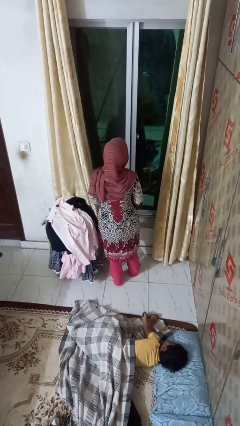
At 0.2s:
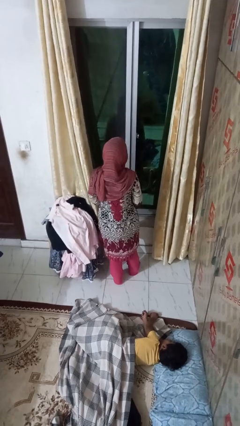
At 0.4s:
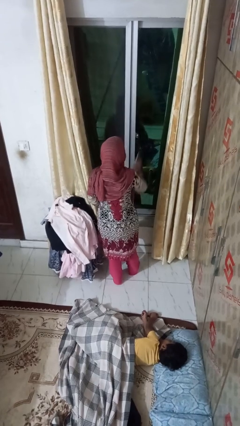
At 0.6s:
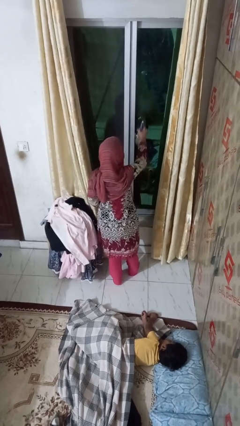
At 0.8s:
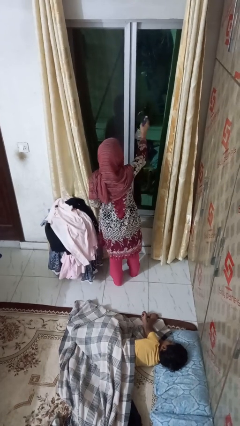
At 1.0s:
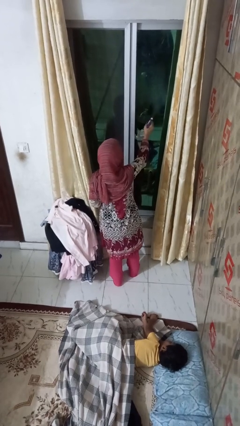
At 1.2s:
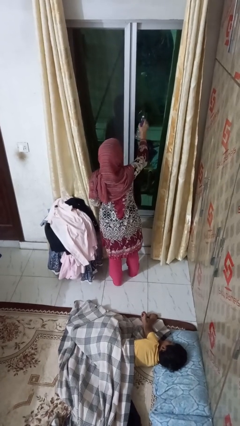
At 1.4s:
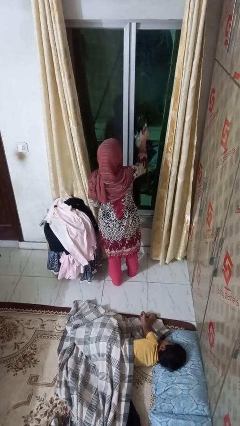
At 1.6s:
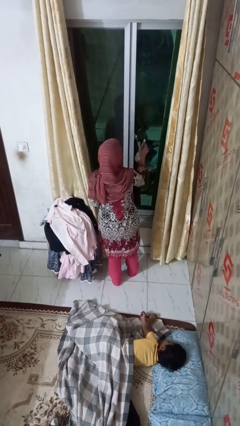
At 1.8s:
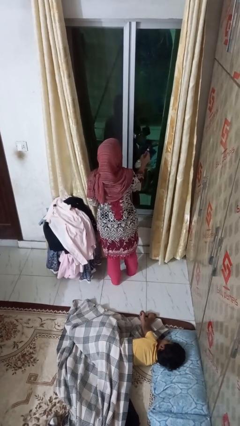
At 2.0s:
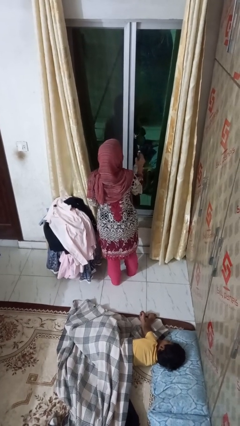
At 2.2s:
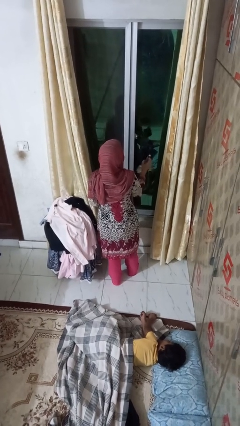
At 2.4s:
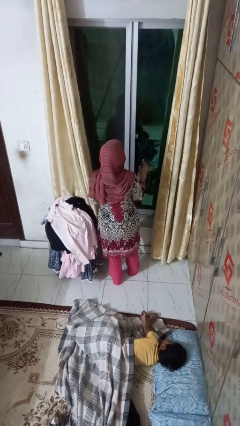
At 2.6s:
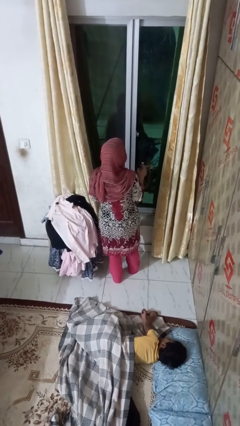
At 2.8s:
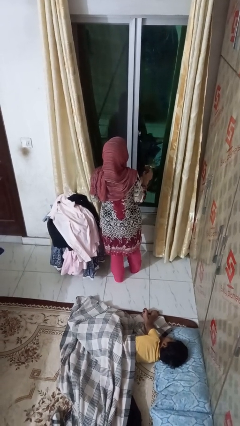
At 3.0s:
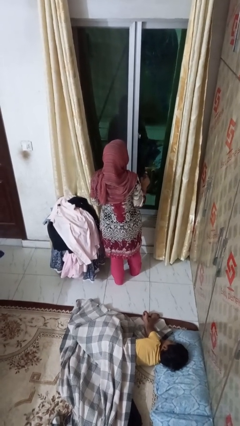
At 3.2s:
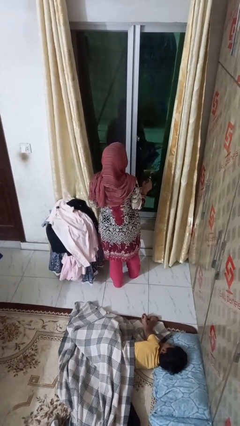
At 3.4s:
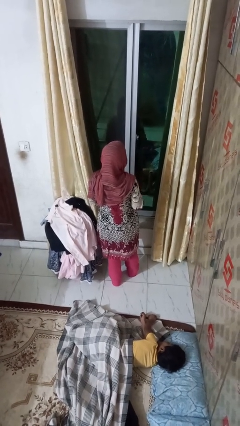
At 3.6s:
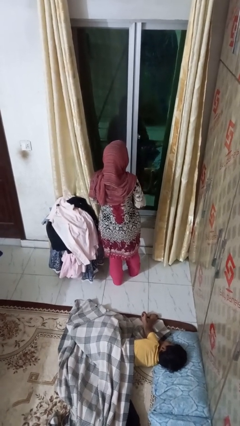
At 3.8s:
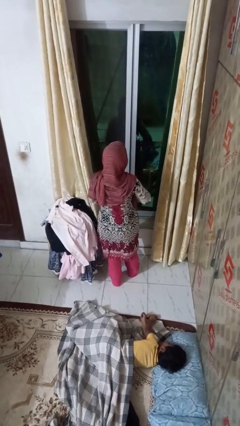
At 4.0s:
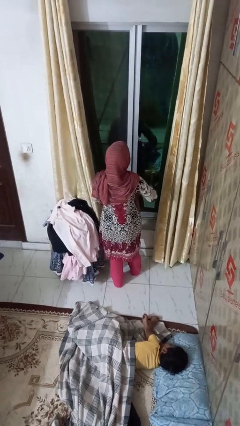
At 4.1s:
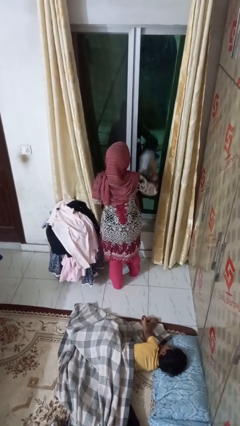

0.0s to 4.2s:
person sprays from bottle

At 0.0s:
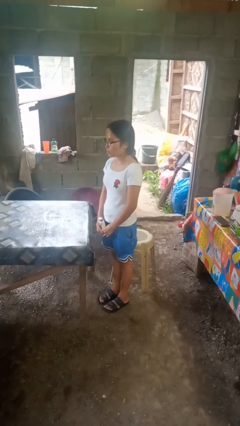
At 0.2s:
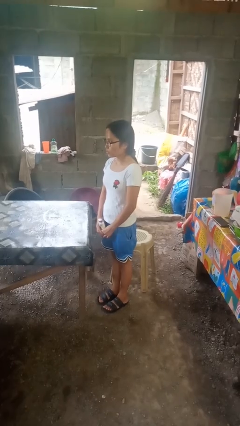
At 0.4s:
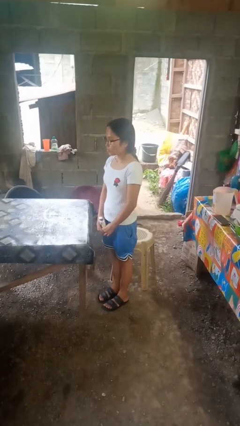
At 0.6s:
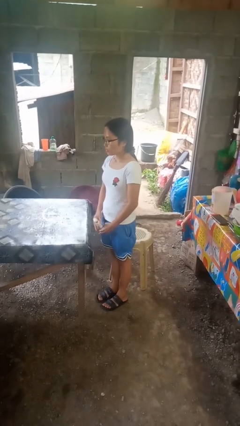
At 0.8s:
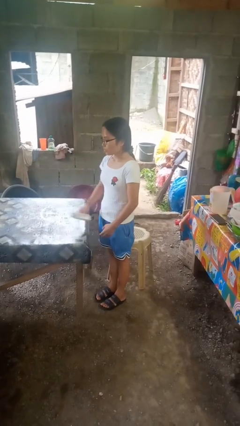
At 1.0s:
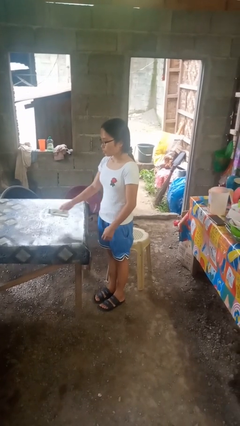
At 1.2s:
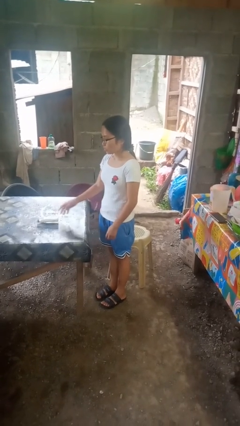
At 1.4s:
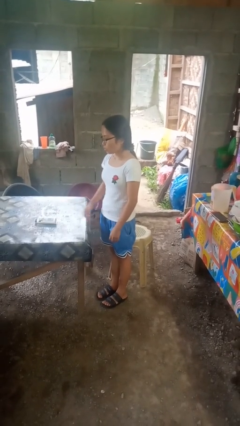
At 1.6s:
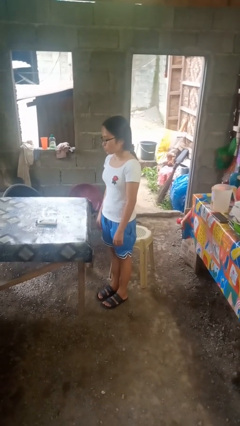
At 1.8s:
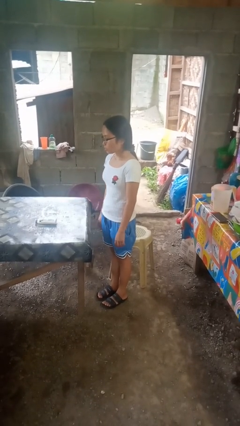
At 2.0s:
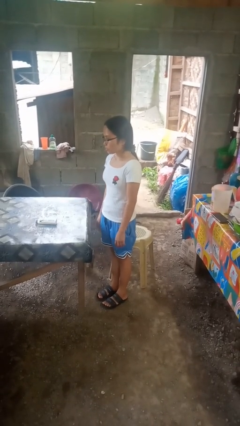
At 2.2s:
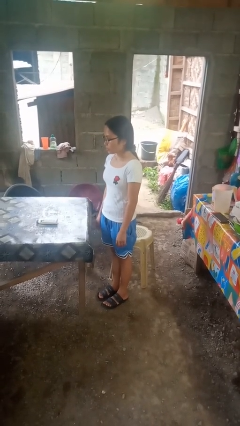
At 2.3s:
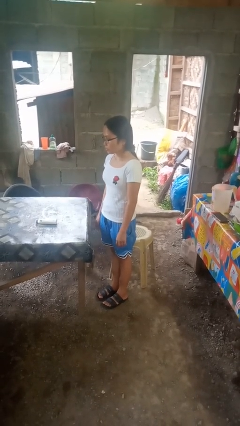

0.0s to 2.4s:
person throws object on table

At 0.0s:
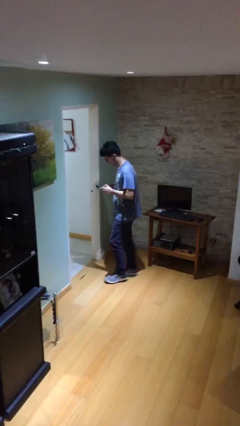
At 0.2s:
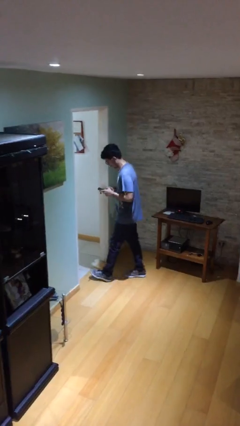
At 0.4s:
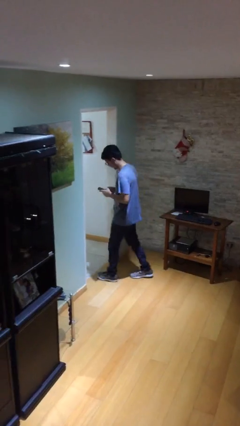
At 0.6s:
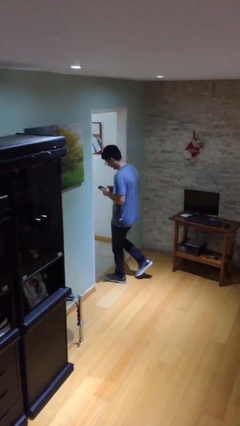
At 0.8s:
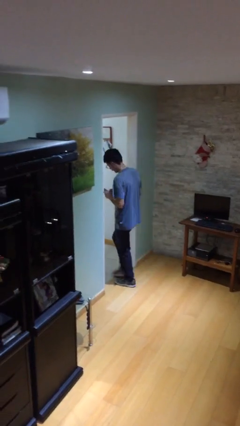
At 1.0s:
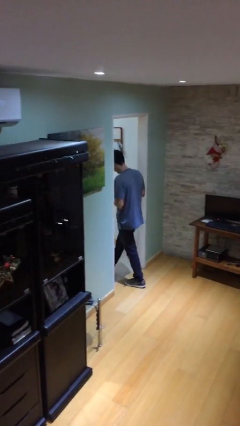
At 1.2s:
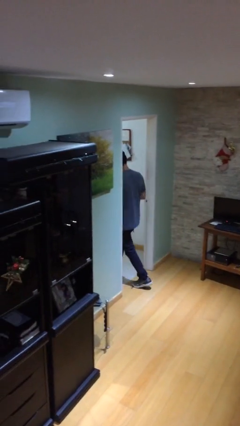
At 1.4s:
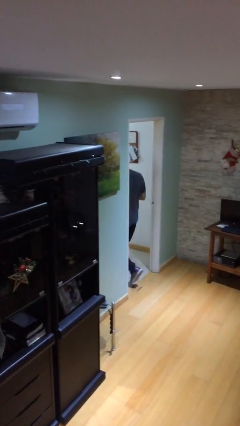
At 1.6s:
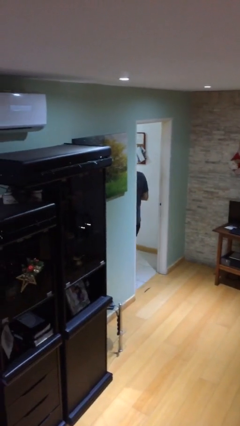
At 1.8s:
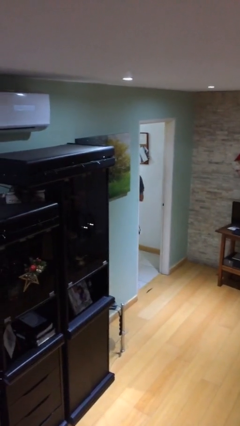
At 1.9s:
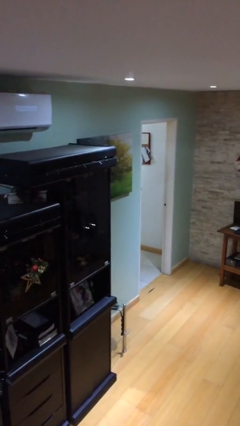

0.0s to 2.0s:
person exits scene through structure

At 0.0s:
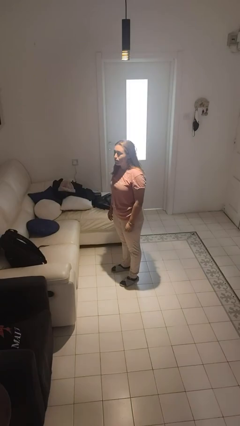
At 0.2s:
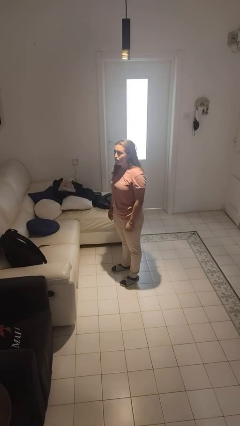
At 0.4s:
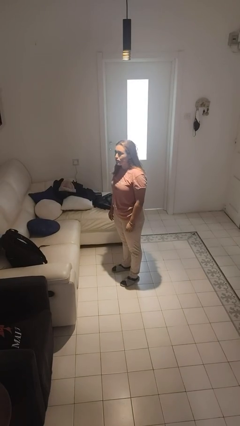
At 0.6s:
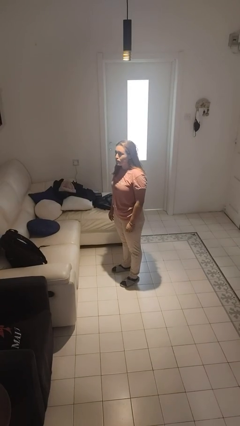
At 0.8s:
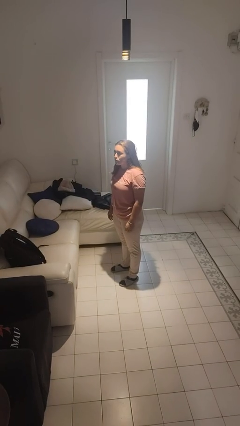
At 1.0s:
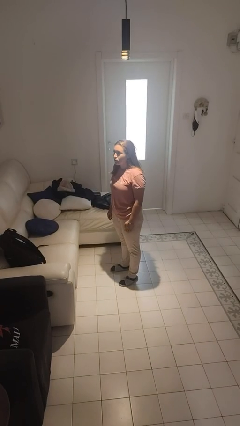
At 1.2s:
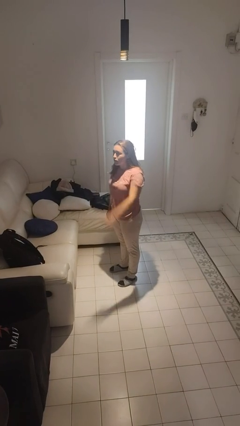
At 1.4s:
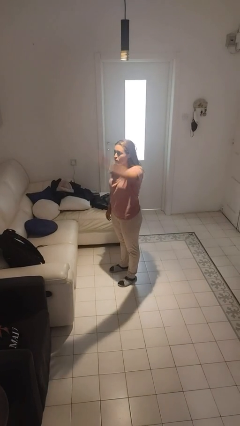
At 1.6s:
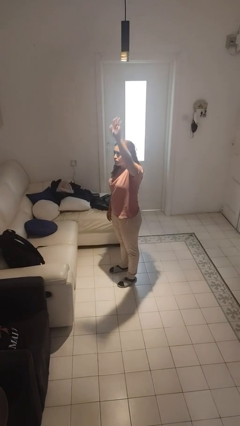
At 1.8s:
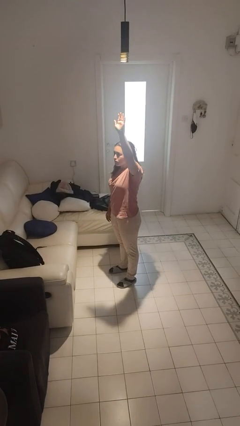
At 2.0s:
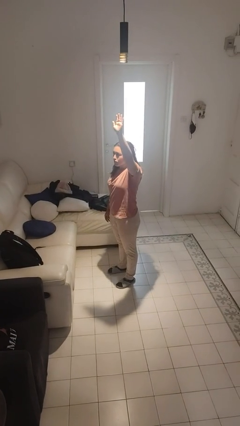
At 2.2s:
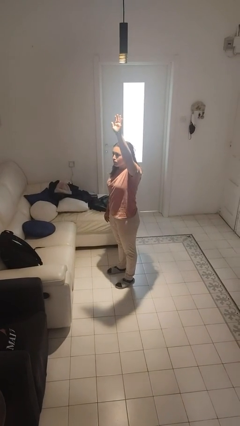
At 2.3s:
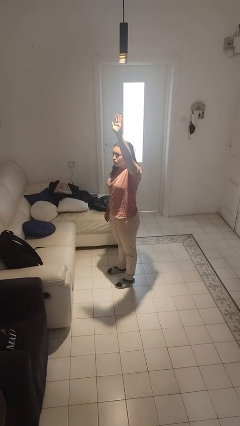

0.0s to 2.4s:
person gestures raise hand

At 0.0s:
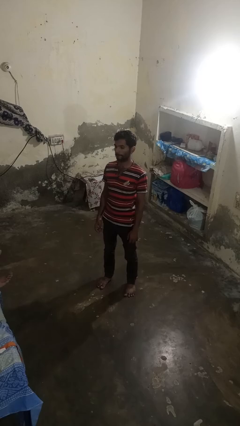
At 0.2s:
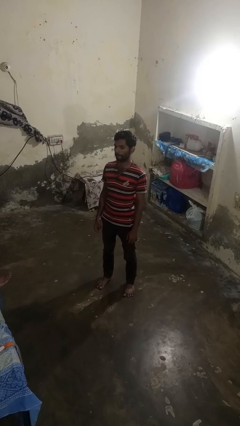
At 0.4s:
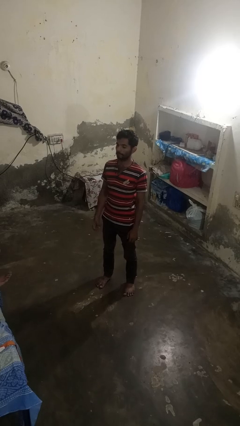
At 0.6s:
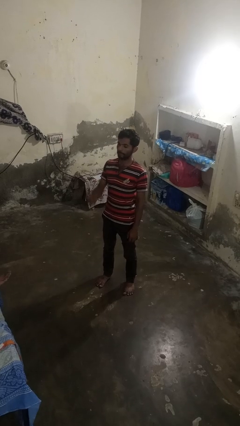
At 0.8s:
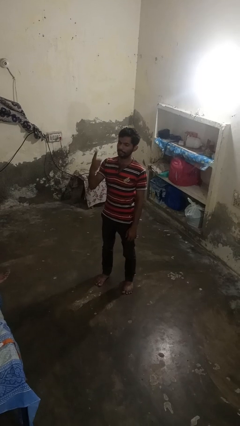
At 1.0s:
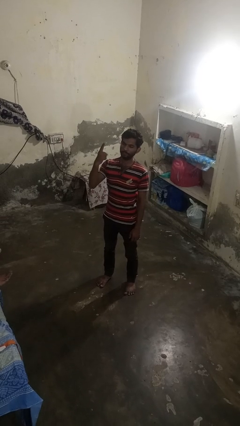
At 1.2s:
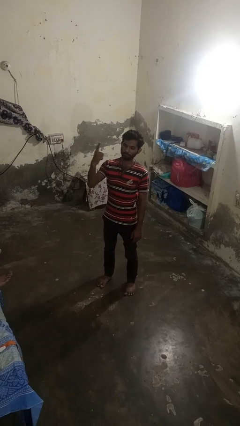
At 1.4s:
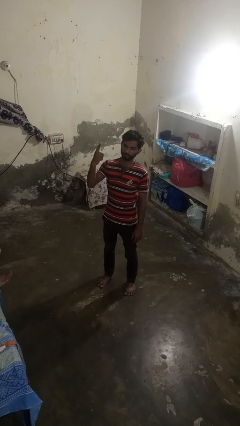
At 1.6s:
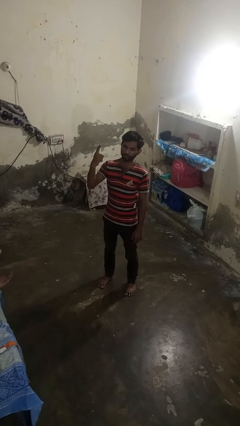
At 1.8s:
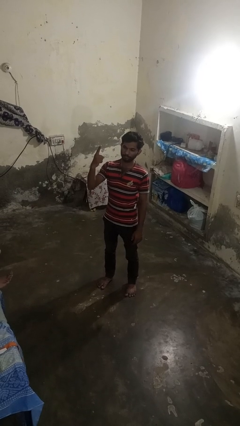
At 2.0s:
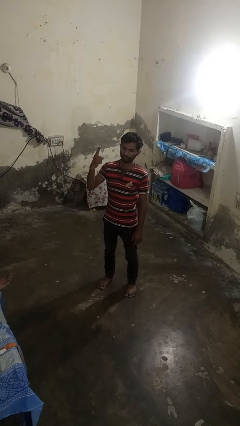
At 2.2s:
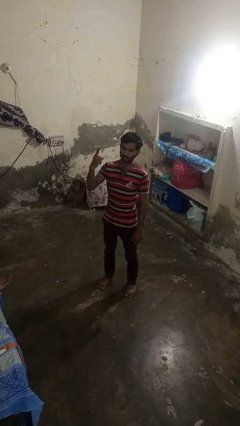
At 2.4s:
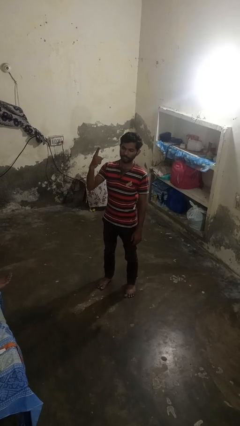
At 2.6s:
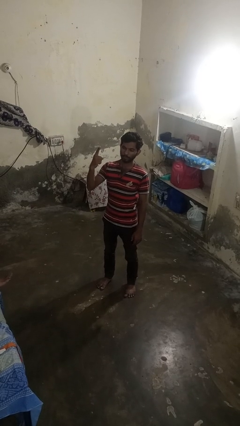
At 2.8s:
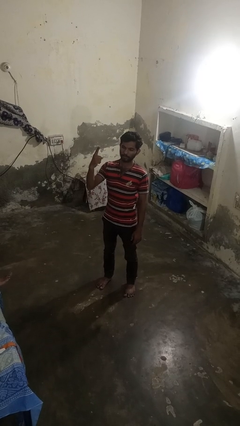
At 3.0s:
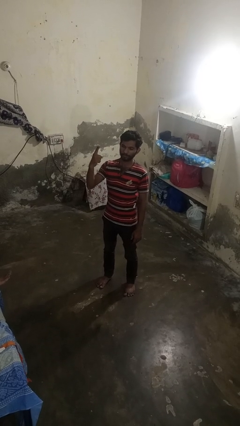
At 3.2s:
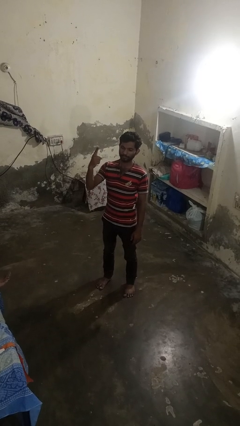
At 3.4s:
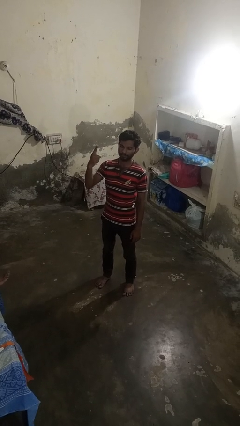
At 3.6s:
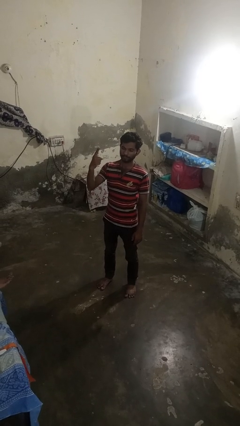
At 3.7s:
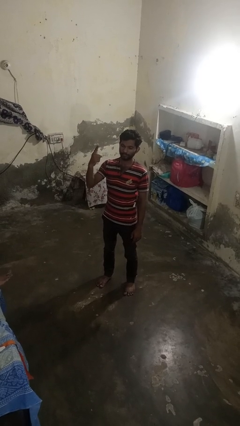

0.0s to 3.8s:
person gestures number one

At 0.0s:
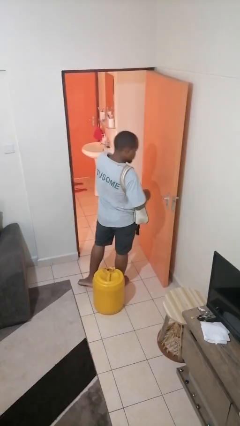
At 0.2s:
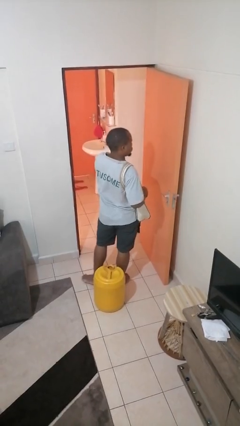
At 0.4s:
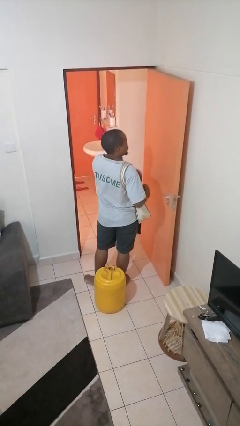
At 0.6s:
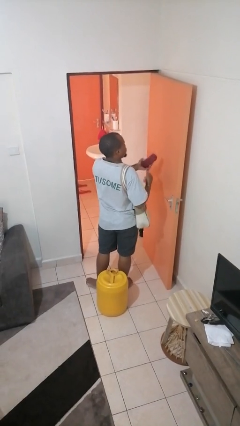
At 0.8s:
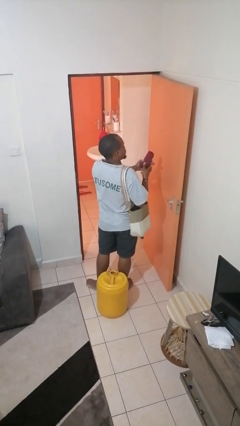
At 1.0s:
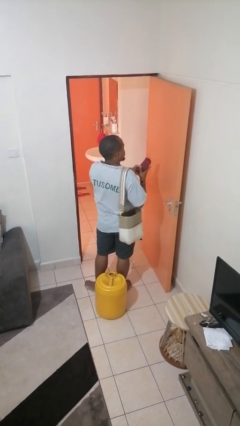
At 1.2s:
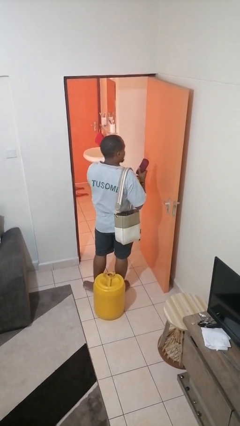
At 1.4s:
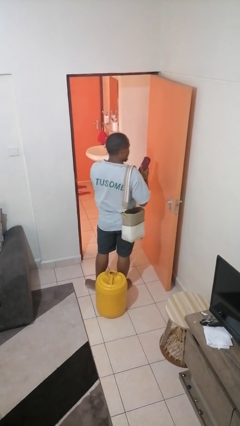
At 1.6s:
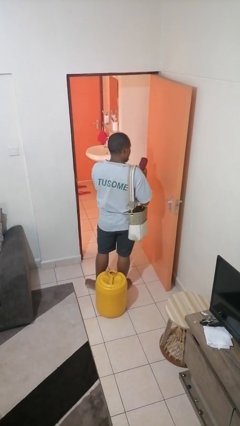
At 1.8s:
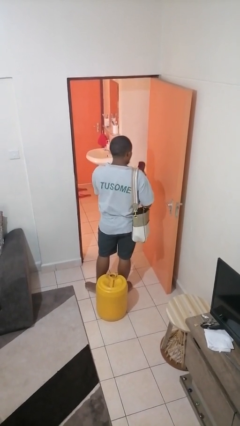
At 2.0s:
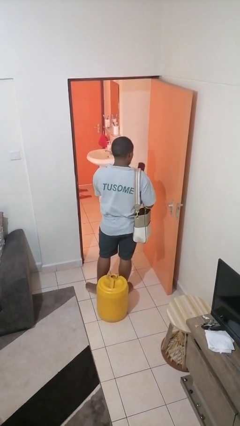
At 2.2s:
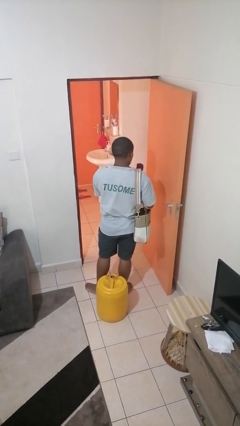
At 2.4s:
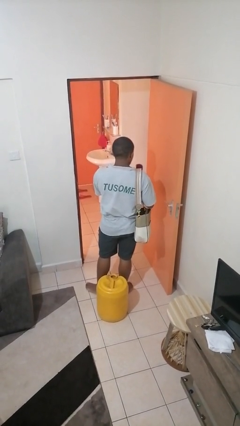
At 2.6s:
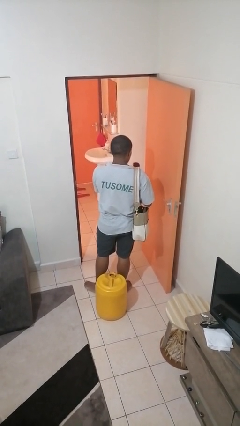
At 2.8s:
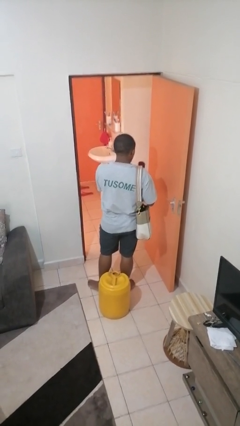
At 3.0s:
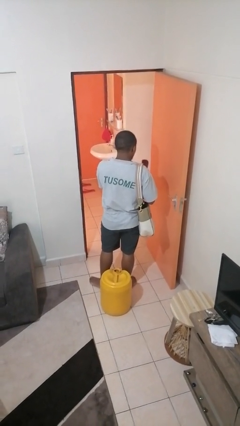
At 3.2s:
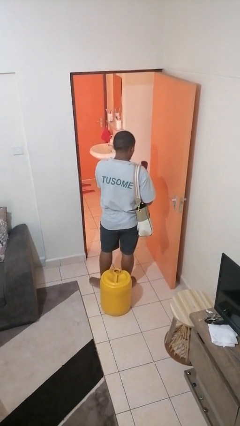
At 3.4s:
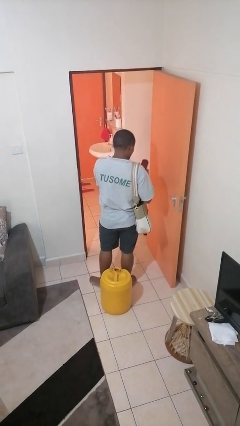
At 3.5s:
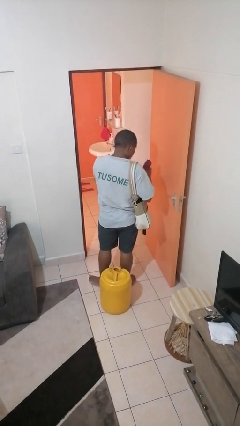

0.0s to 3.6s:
person takes object from purse
